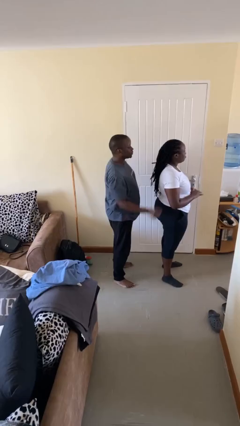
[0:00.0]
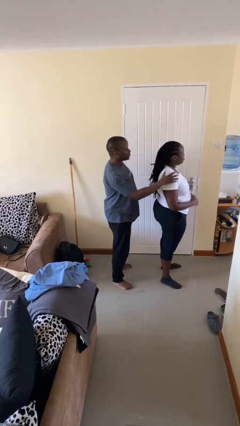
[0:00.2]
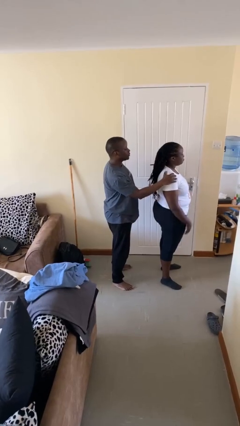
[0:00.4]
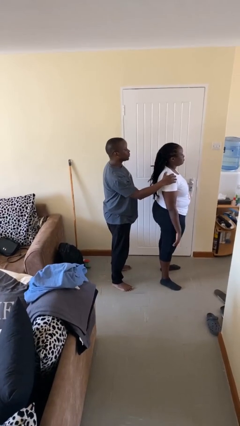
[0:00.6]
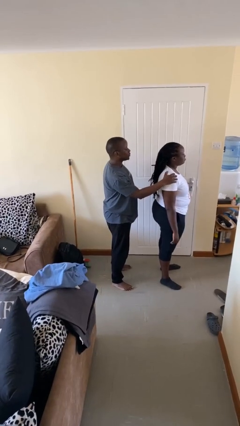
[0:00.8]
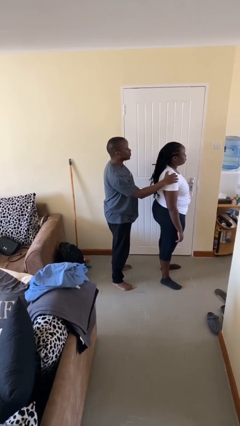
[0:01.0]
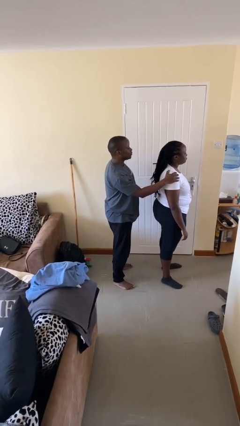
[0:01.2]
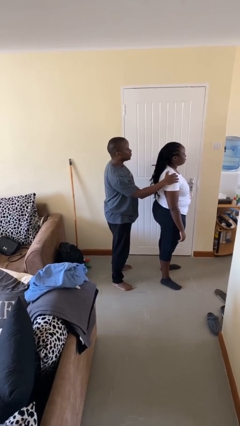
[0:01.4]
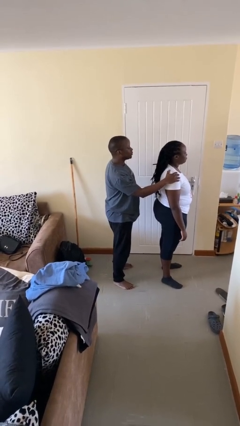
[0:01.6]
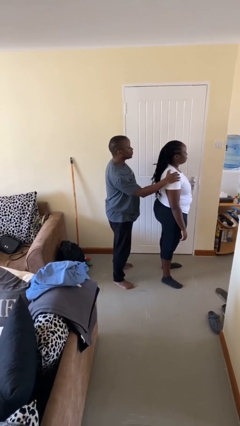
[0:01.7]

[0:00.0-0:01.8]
person grabs person by shoulder

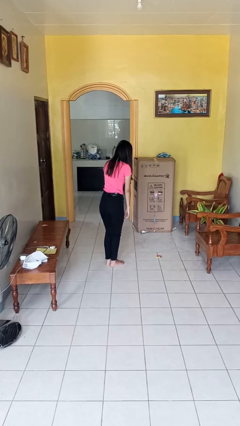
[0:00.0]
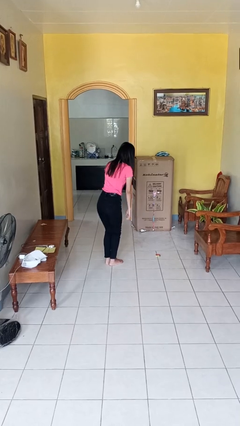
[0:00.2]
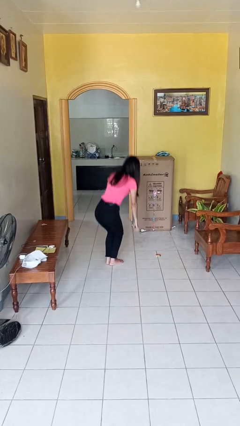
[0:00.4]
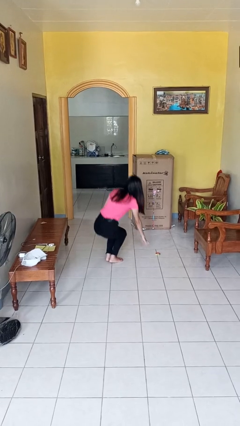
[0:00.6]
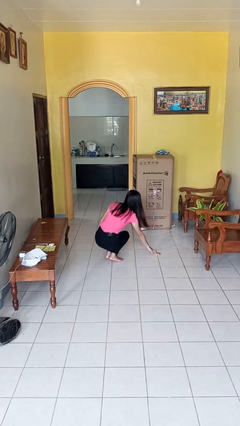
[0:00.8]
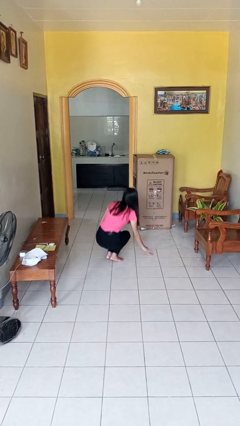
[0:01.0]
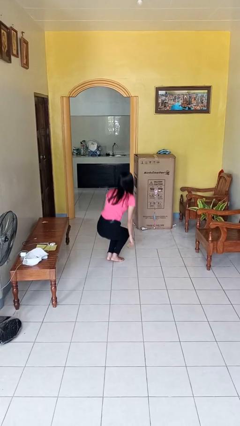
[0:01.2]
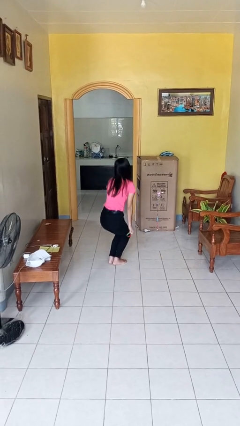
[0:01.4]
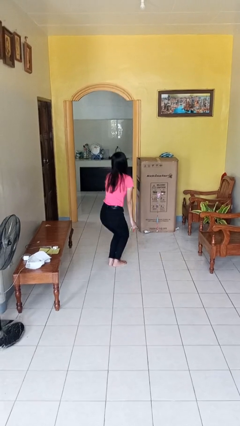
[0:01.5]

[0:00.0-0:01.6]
person picks up object from floor

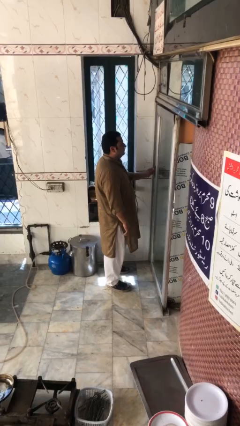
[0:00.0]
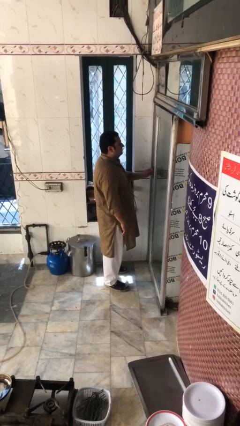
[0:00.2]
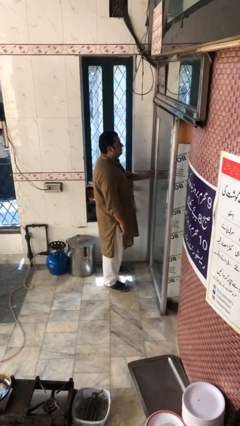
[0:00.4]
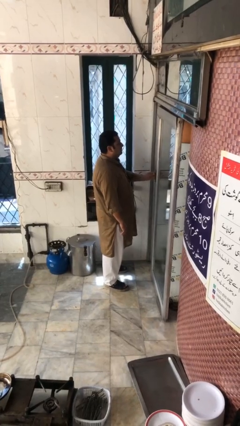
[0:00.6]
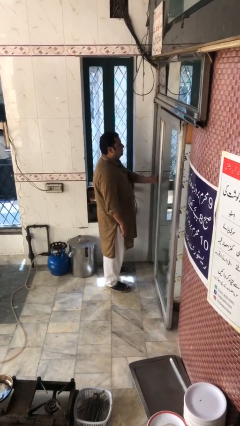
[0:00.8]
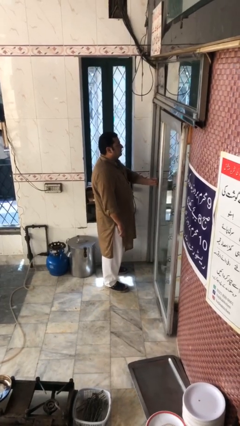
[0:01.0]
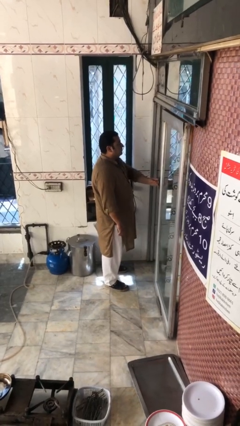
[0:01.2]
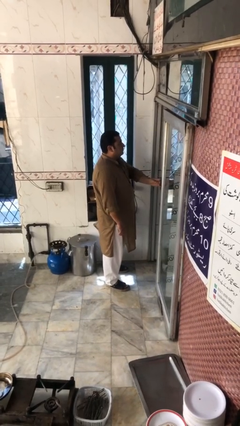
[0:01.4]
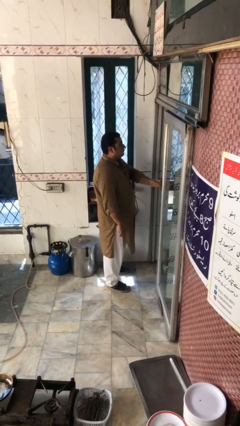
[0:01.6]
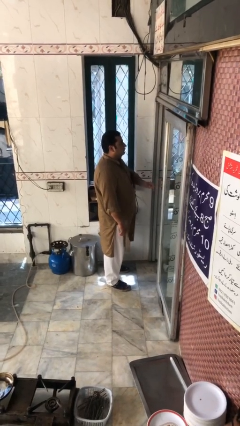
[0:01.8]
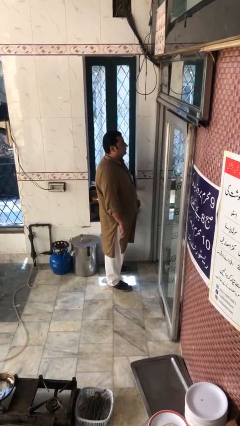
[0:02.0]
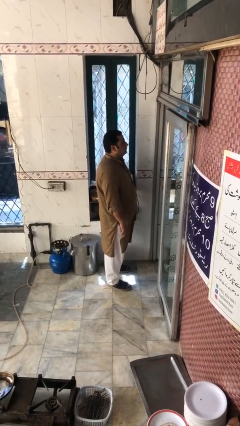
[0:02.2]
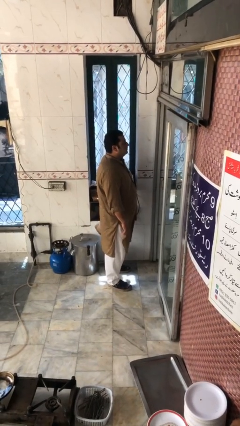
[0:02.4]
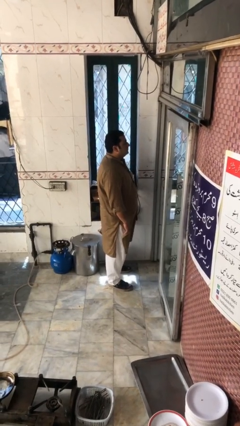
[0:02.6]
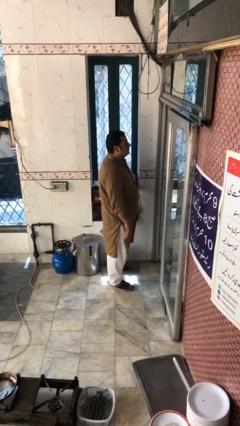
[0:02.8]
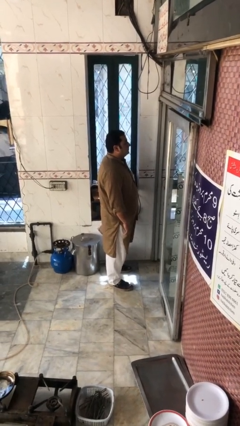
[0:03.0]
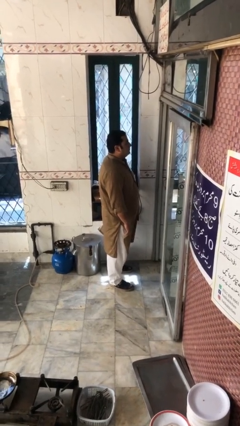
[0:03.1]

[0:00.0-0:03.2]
person opens sliding door

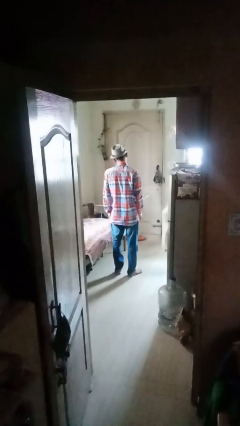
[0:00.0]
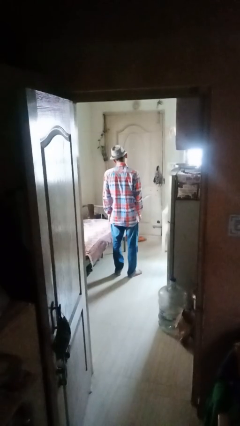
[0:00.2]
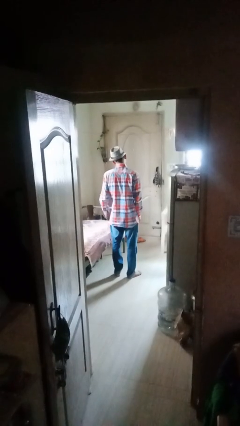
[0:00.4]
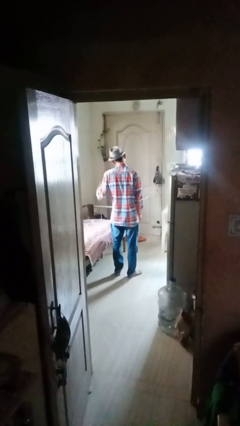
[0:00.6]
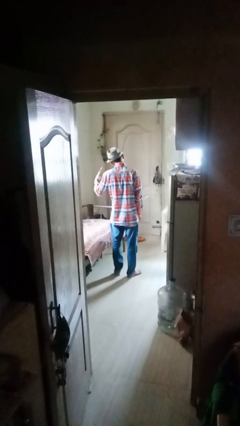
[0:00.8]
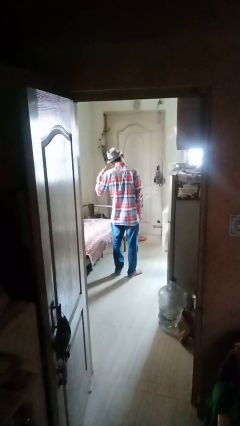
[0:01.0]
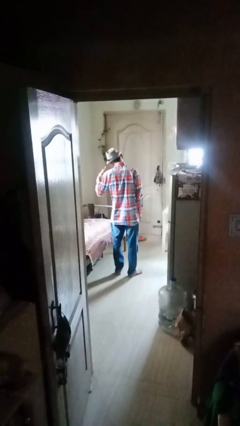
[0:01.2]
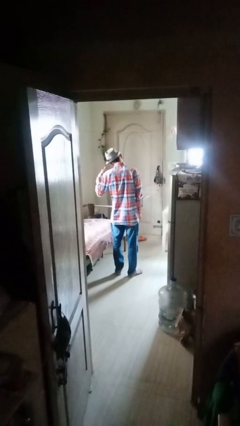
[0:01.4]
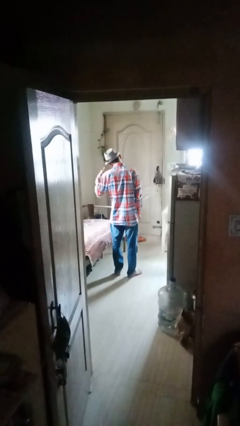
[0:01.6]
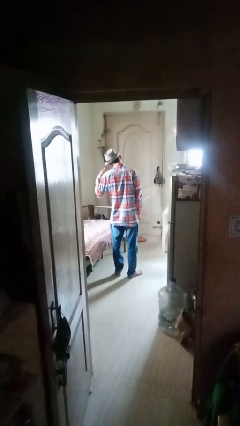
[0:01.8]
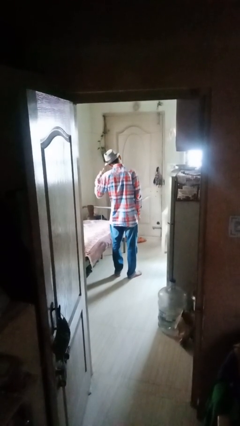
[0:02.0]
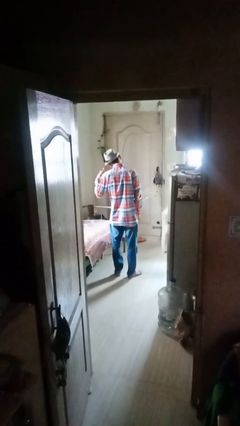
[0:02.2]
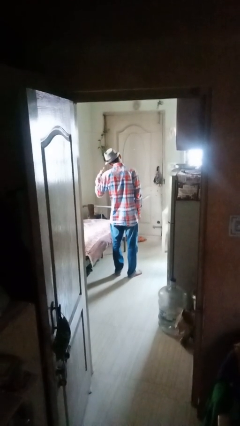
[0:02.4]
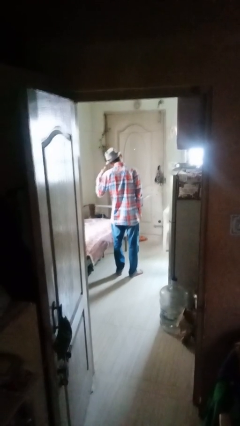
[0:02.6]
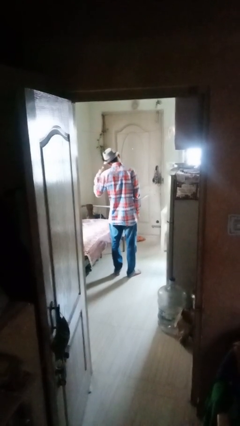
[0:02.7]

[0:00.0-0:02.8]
person gestures call me

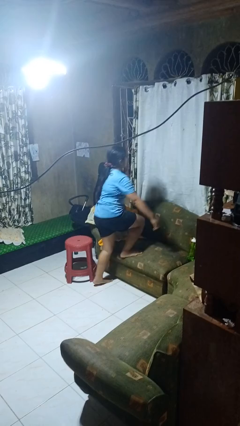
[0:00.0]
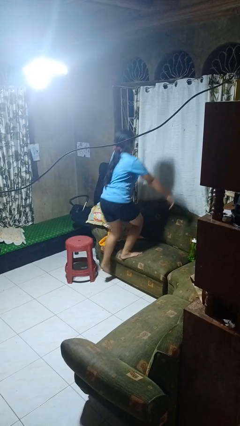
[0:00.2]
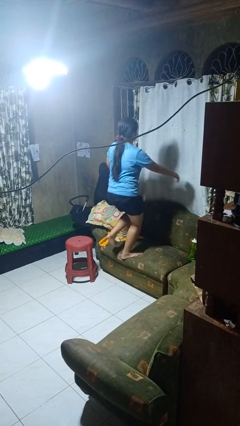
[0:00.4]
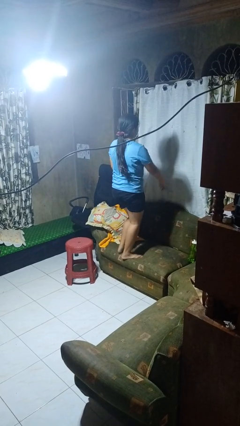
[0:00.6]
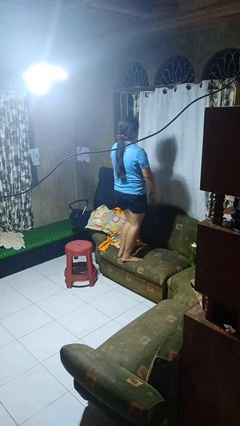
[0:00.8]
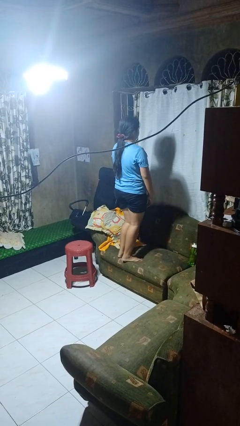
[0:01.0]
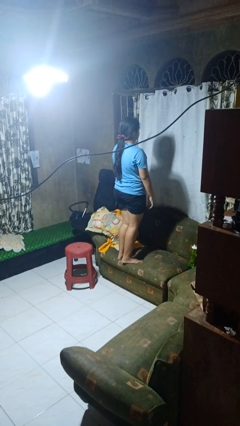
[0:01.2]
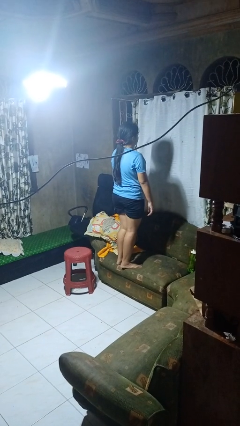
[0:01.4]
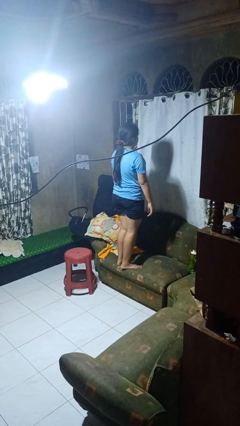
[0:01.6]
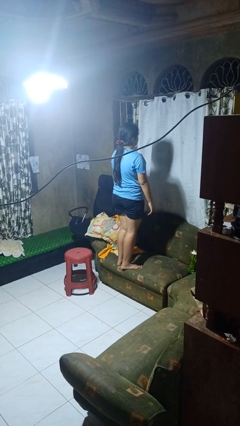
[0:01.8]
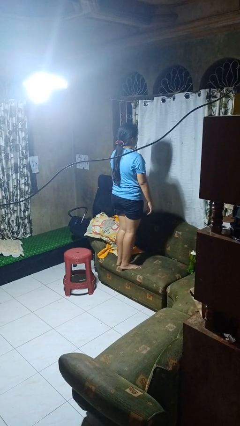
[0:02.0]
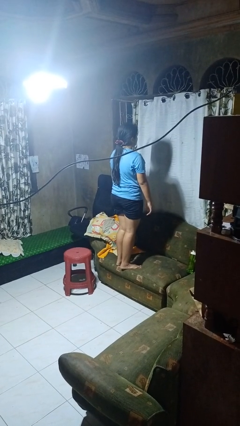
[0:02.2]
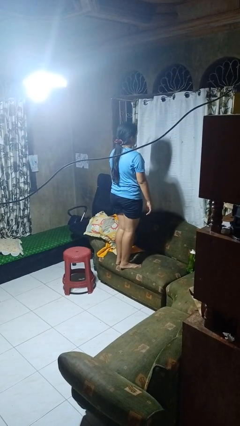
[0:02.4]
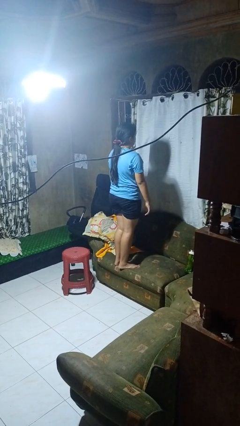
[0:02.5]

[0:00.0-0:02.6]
person climbs on couch

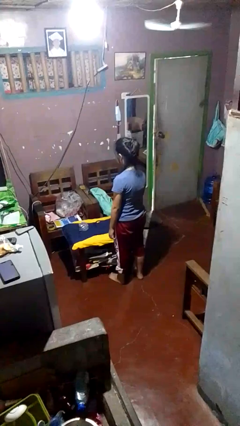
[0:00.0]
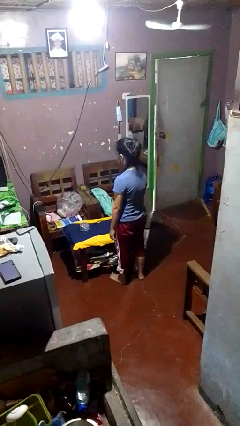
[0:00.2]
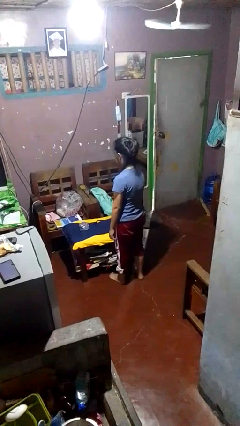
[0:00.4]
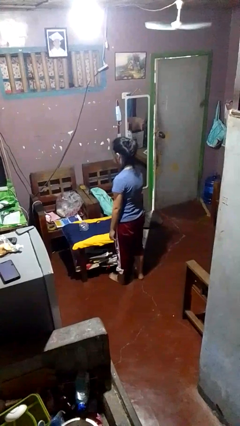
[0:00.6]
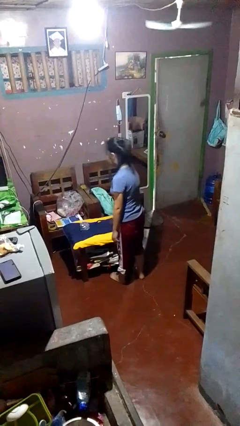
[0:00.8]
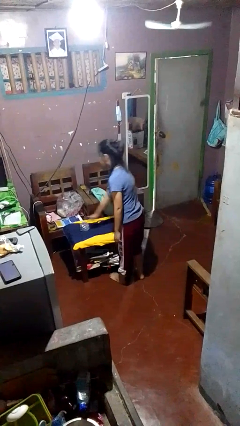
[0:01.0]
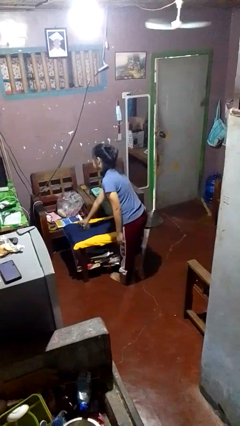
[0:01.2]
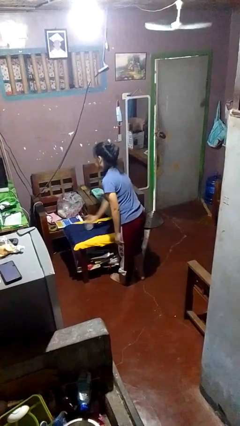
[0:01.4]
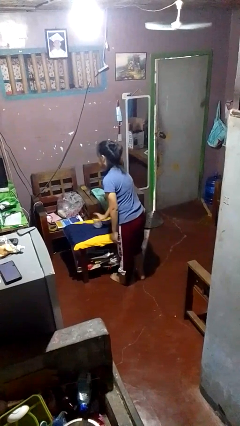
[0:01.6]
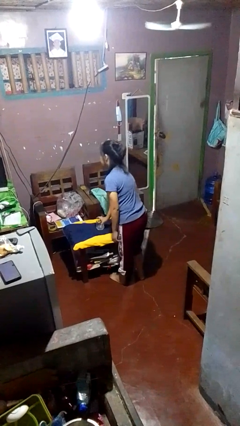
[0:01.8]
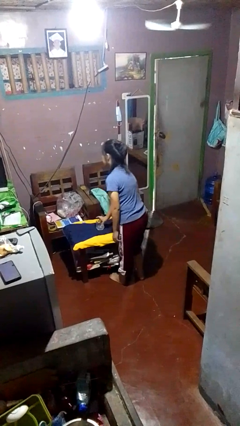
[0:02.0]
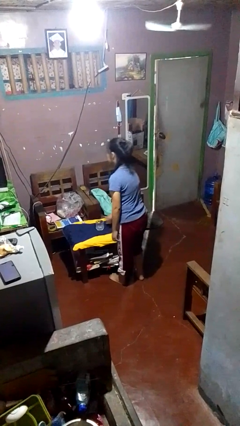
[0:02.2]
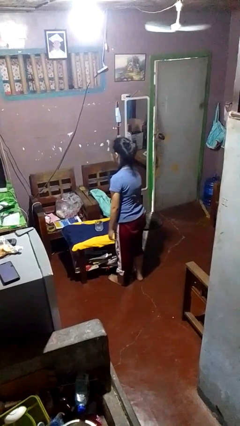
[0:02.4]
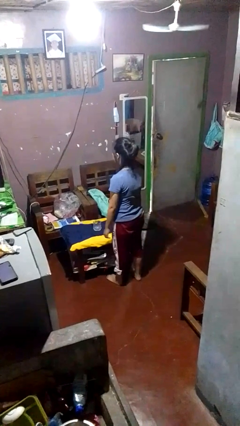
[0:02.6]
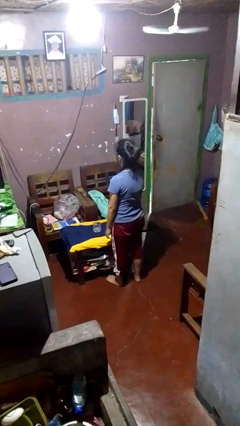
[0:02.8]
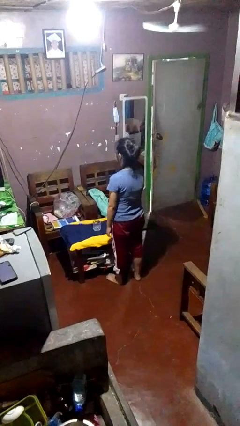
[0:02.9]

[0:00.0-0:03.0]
person sets upright glass

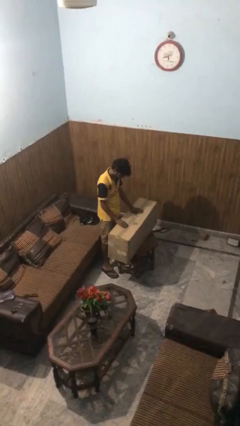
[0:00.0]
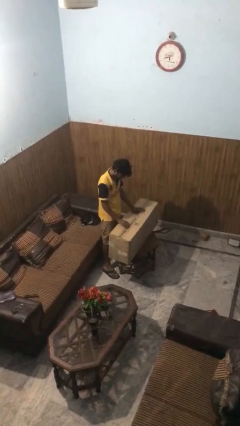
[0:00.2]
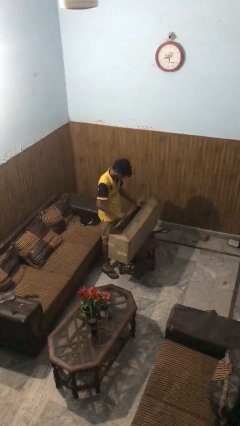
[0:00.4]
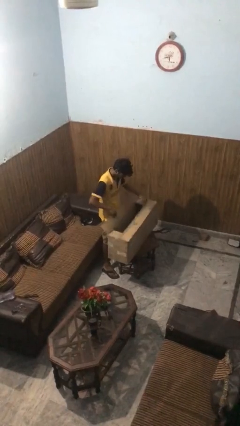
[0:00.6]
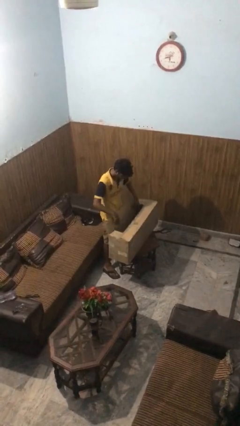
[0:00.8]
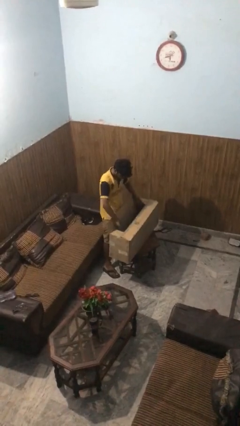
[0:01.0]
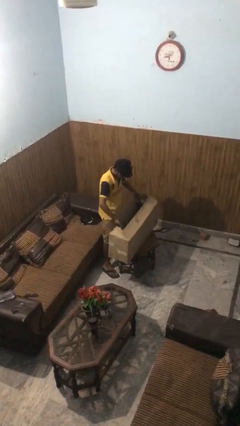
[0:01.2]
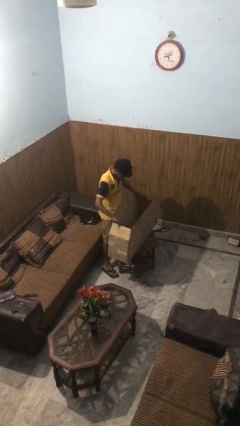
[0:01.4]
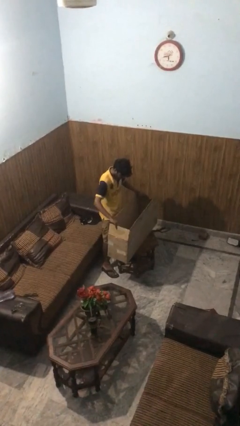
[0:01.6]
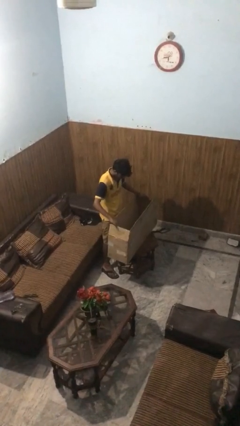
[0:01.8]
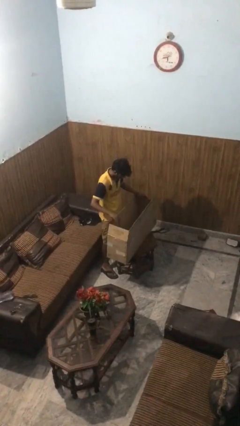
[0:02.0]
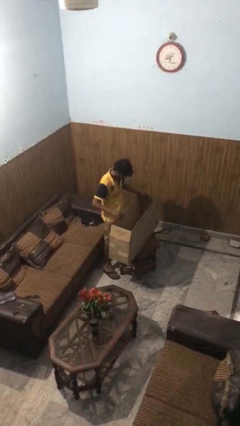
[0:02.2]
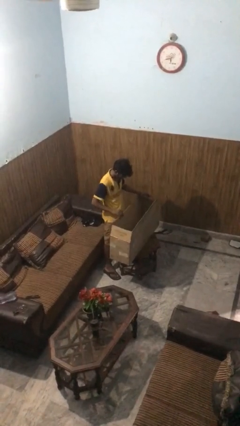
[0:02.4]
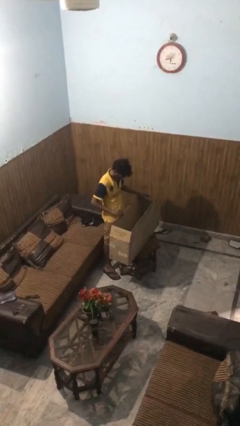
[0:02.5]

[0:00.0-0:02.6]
person opens box
